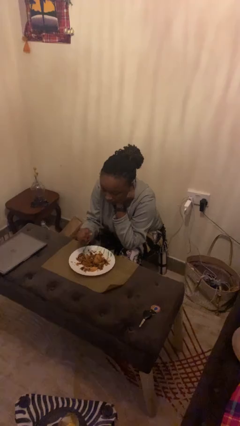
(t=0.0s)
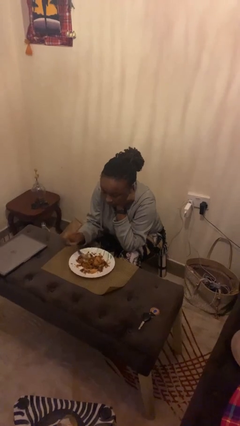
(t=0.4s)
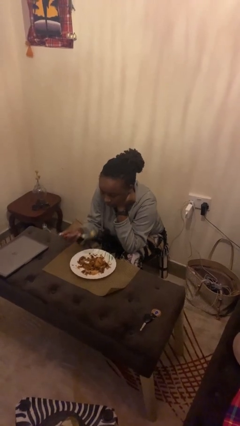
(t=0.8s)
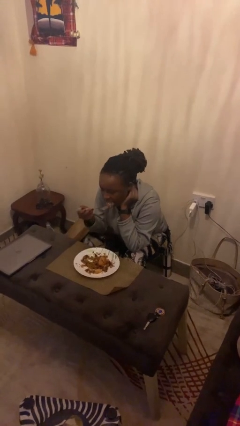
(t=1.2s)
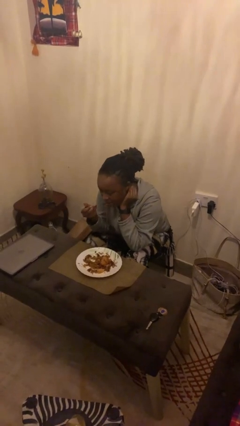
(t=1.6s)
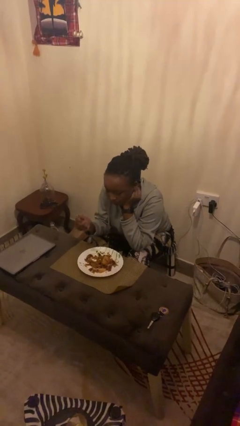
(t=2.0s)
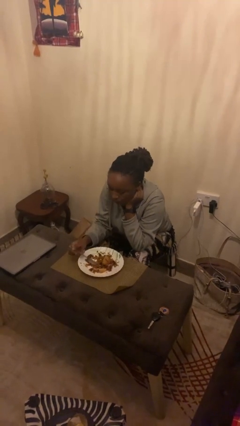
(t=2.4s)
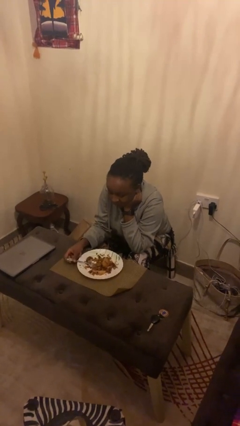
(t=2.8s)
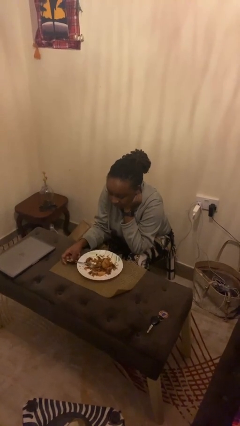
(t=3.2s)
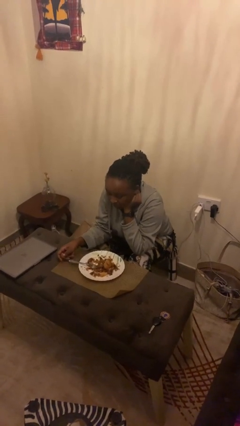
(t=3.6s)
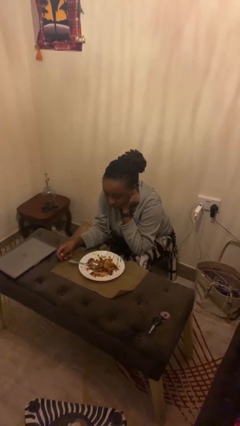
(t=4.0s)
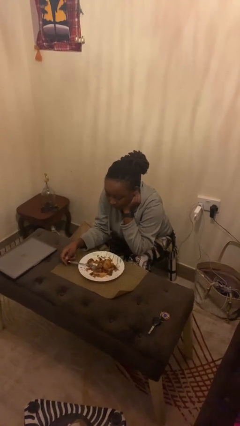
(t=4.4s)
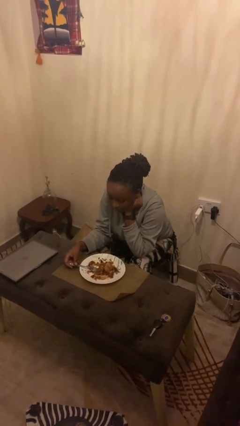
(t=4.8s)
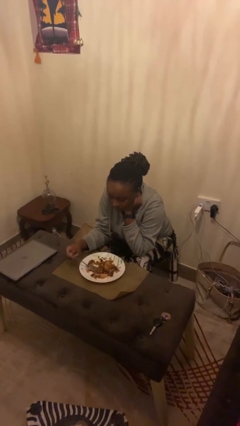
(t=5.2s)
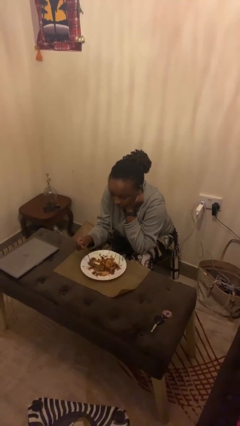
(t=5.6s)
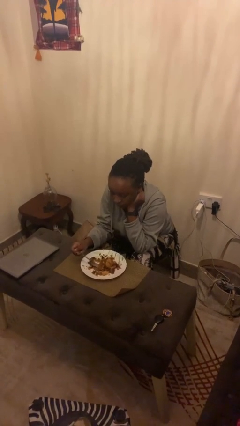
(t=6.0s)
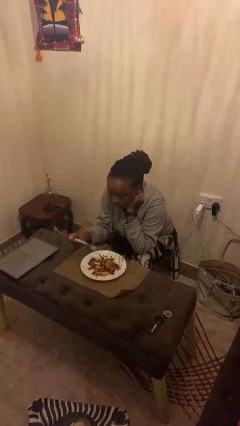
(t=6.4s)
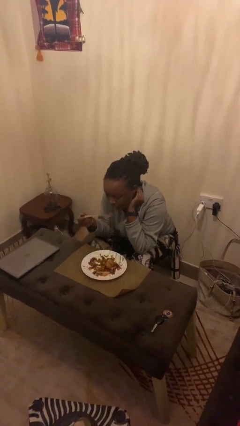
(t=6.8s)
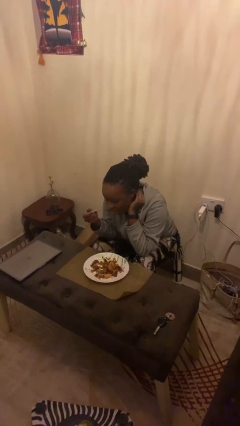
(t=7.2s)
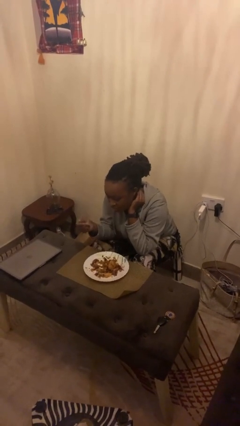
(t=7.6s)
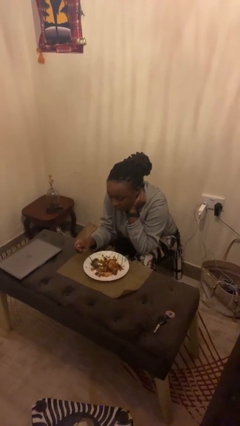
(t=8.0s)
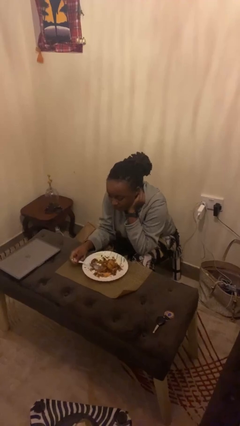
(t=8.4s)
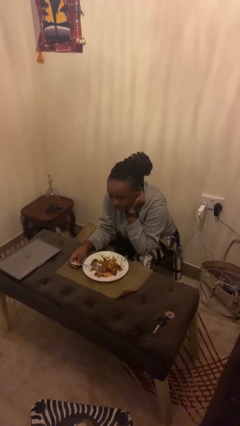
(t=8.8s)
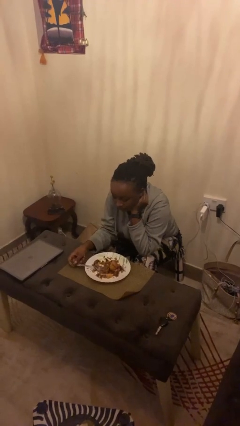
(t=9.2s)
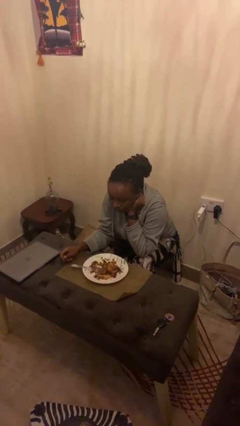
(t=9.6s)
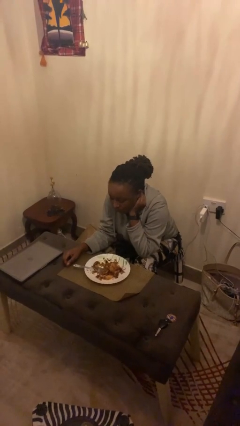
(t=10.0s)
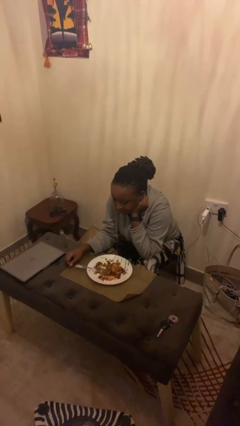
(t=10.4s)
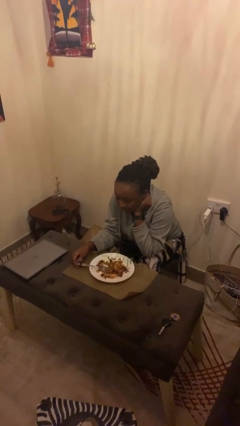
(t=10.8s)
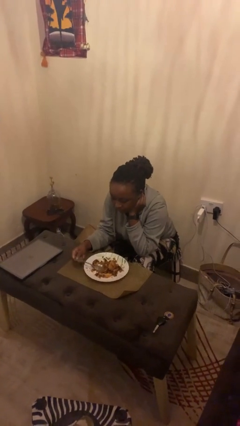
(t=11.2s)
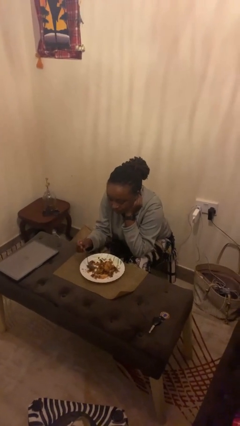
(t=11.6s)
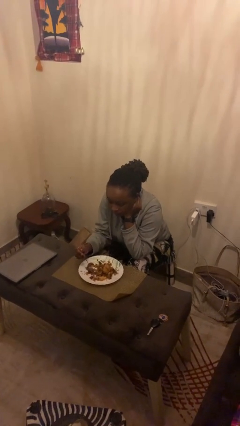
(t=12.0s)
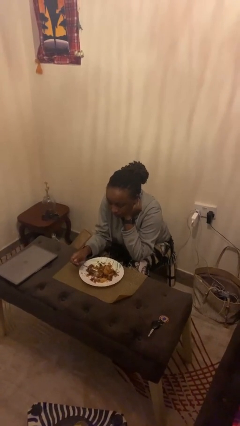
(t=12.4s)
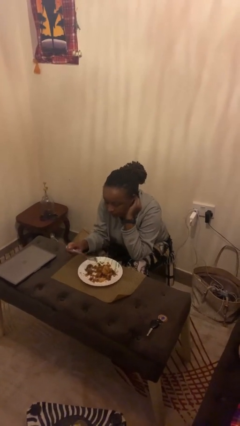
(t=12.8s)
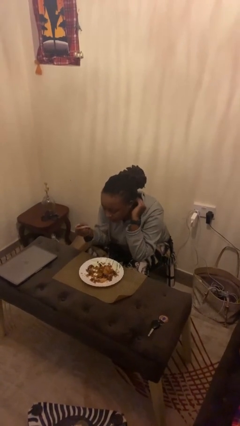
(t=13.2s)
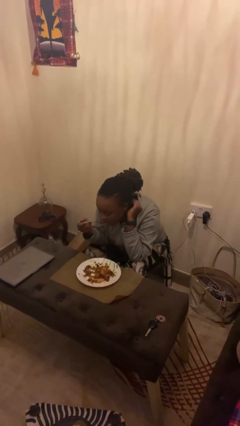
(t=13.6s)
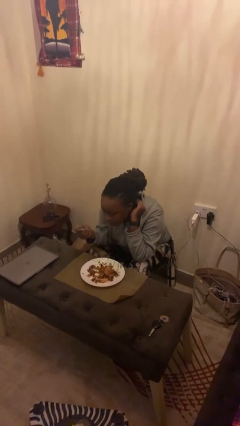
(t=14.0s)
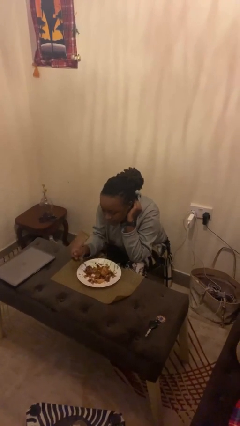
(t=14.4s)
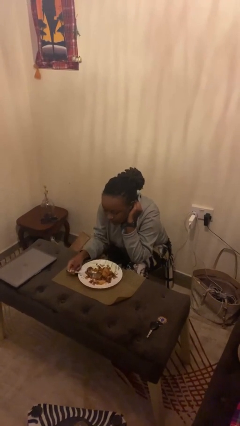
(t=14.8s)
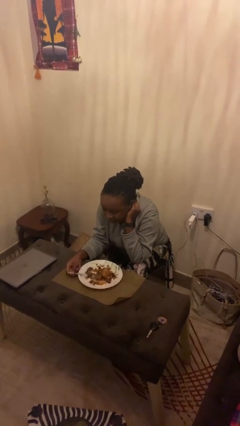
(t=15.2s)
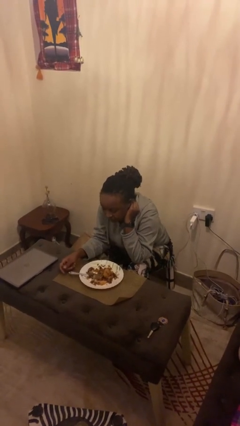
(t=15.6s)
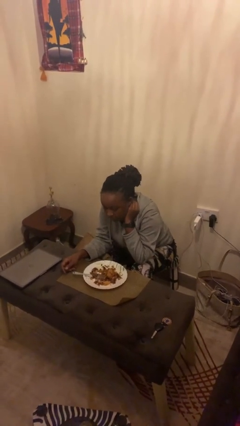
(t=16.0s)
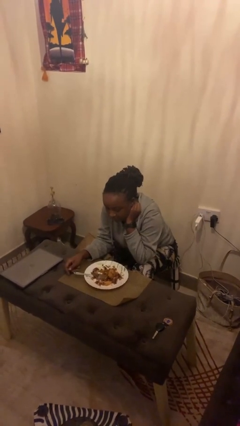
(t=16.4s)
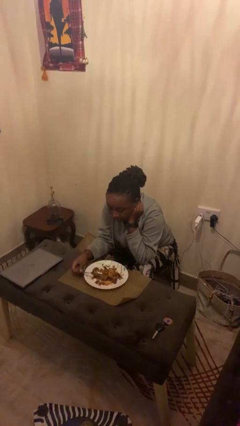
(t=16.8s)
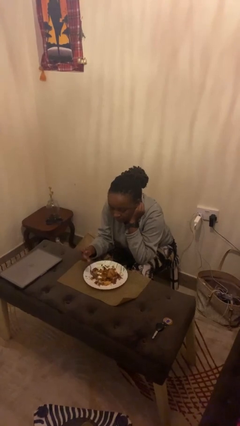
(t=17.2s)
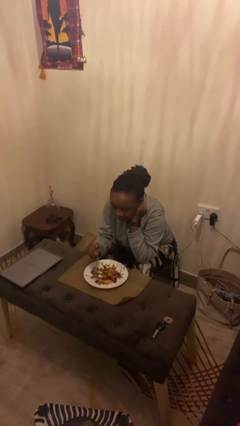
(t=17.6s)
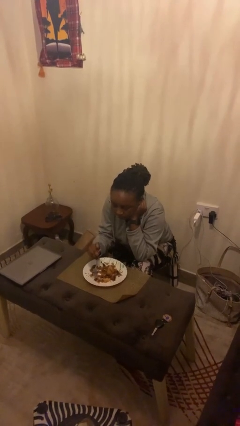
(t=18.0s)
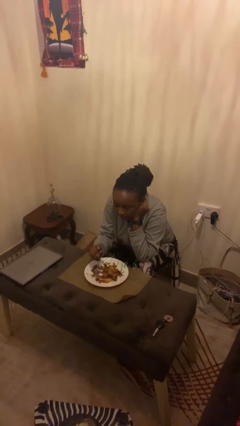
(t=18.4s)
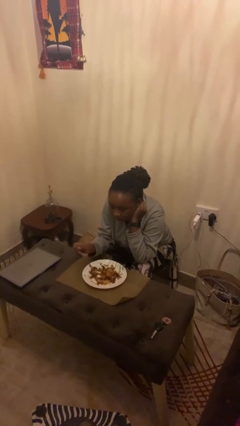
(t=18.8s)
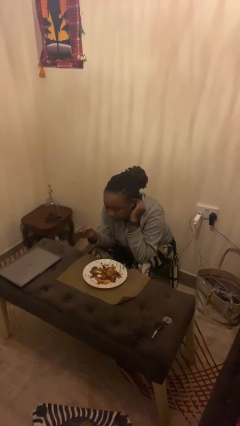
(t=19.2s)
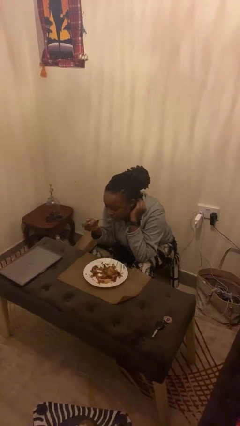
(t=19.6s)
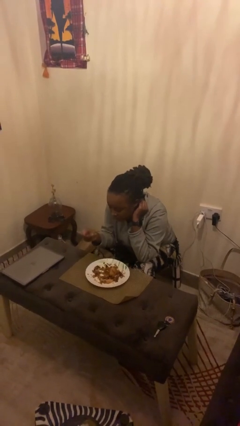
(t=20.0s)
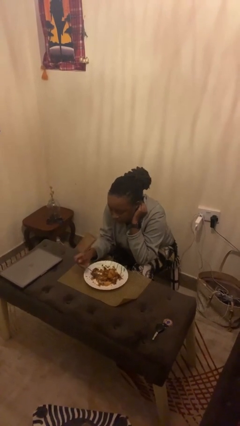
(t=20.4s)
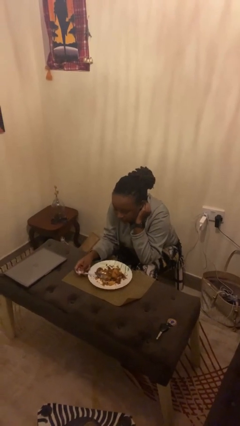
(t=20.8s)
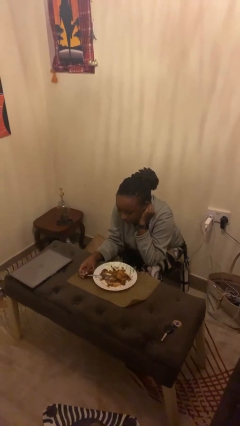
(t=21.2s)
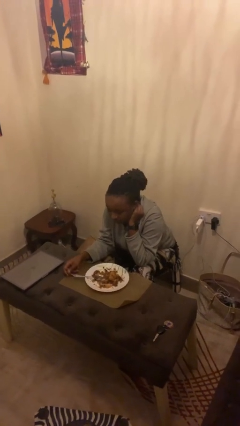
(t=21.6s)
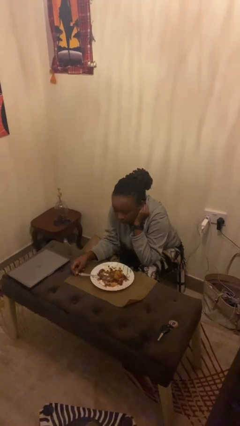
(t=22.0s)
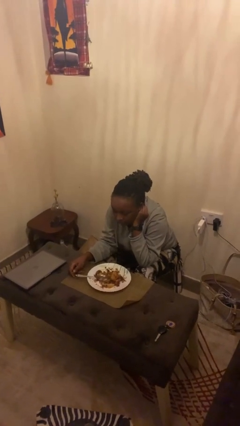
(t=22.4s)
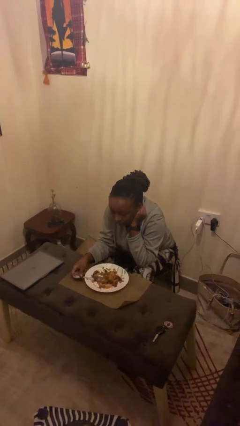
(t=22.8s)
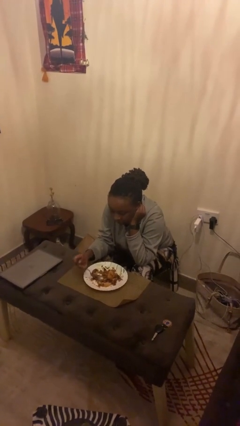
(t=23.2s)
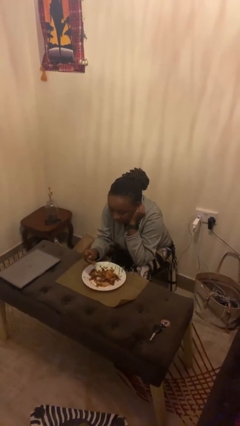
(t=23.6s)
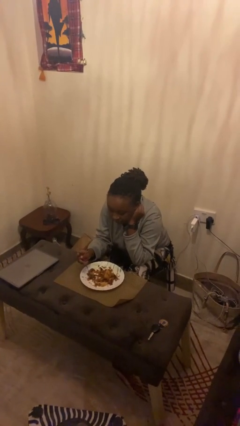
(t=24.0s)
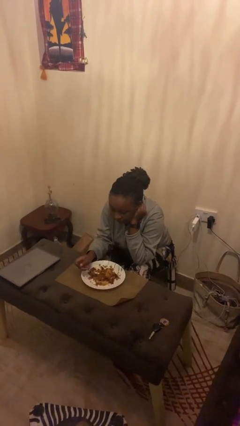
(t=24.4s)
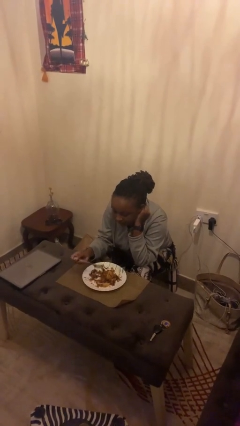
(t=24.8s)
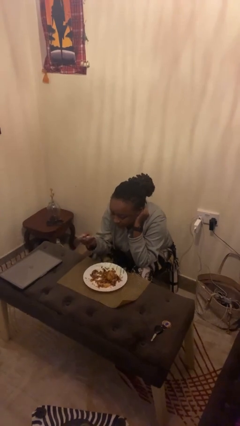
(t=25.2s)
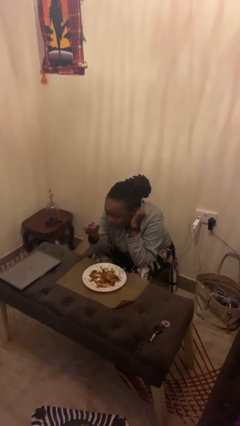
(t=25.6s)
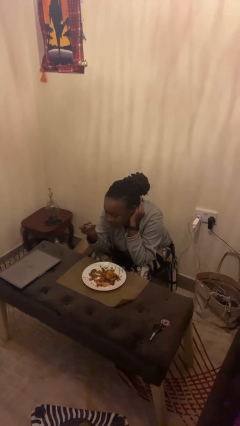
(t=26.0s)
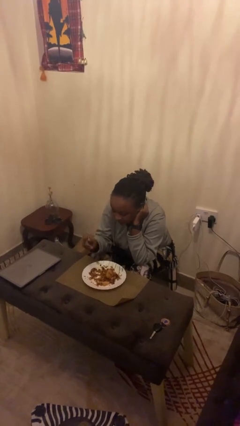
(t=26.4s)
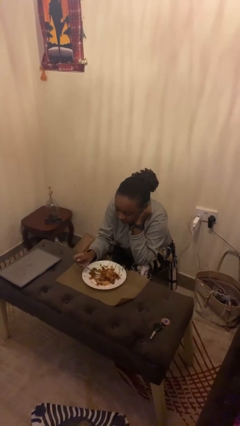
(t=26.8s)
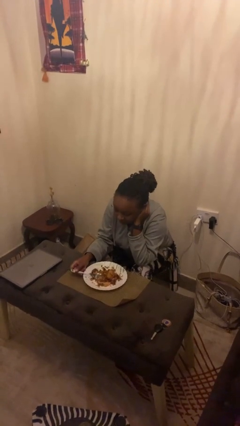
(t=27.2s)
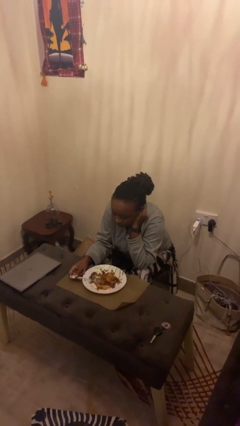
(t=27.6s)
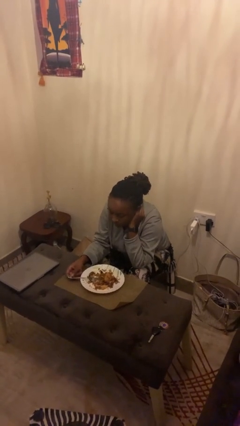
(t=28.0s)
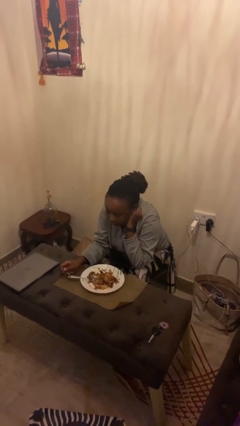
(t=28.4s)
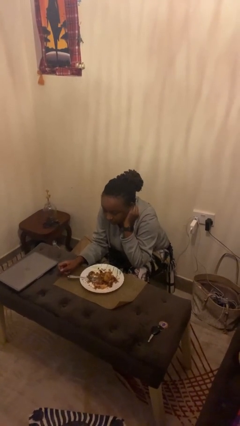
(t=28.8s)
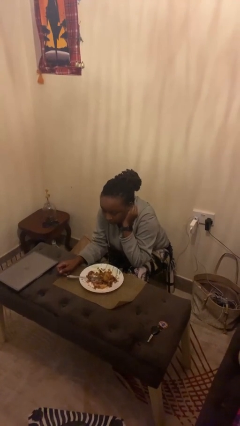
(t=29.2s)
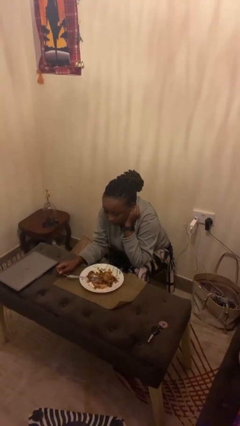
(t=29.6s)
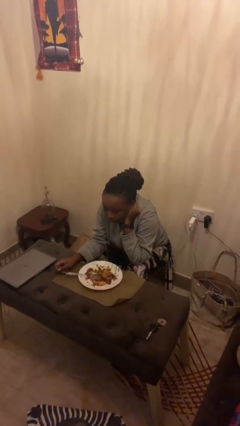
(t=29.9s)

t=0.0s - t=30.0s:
person eats with utensil

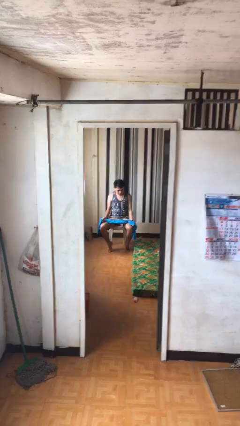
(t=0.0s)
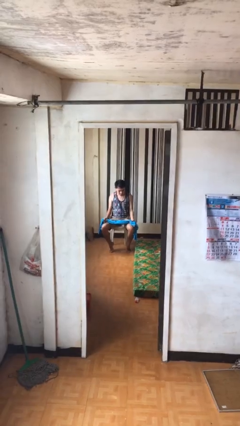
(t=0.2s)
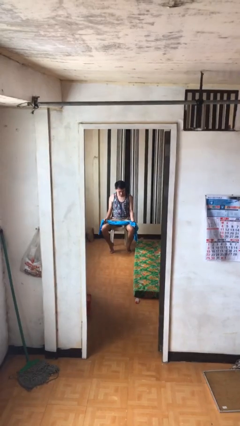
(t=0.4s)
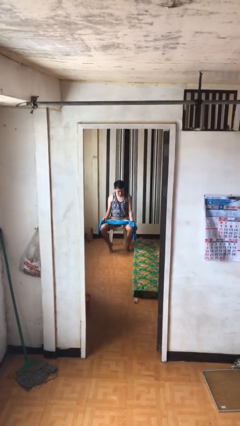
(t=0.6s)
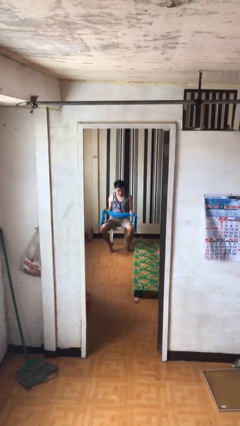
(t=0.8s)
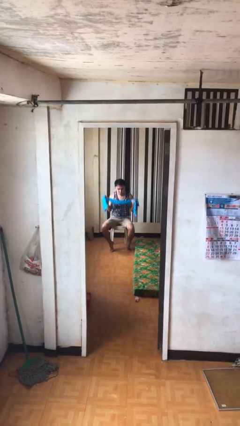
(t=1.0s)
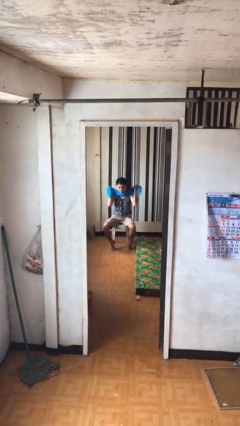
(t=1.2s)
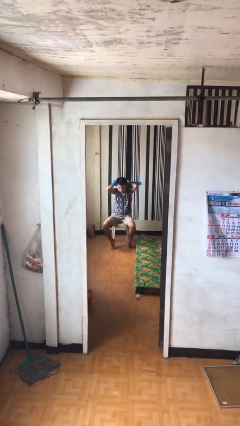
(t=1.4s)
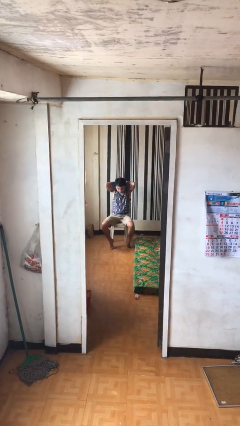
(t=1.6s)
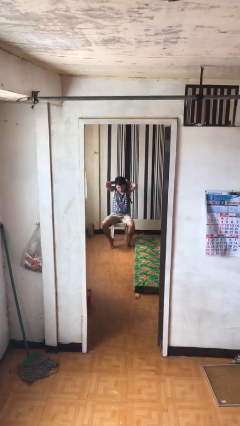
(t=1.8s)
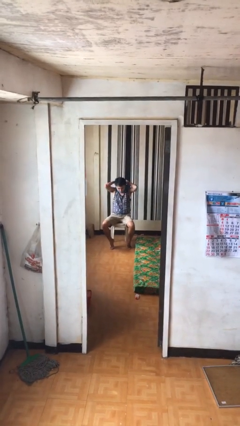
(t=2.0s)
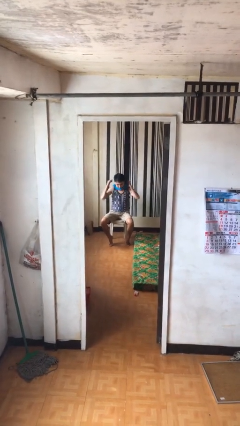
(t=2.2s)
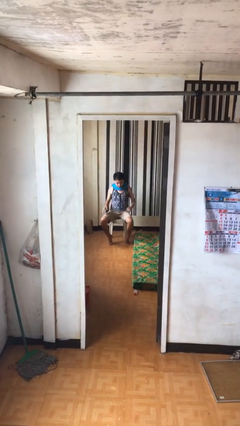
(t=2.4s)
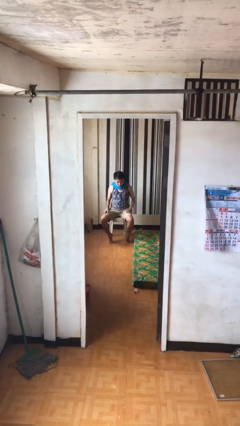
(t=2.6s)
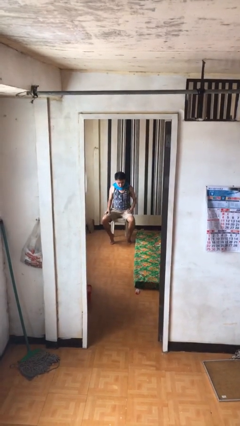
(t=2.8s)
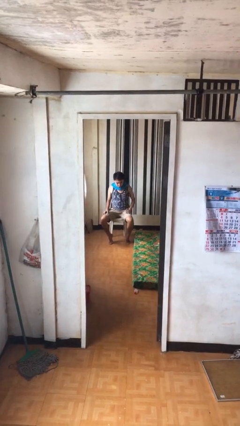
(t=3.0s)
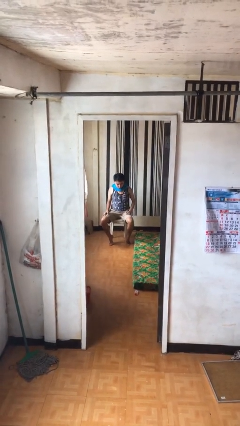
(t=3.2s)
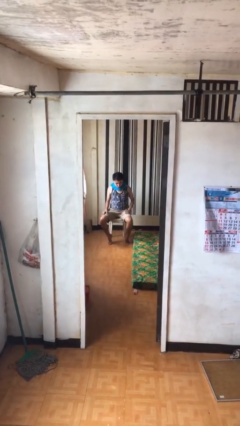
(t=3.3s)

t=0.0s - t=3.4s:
person puts on scarf
